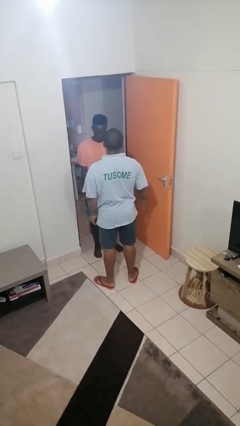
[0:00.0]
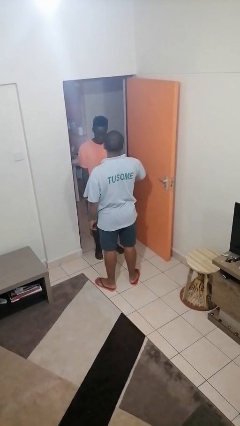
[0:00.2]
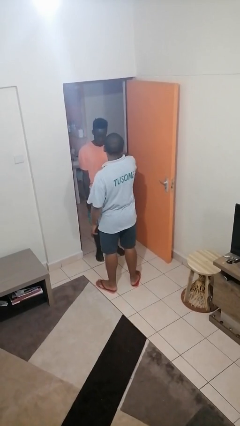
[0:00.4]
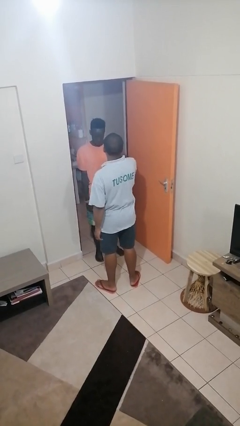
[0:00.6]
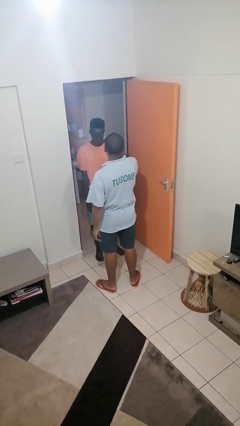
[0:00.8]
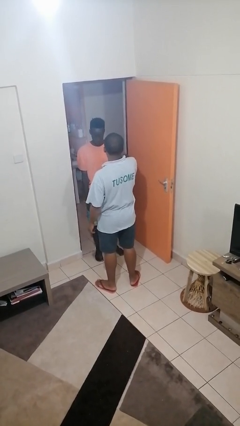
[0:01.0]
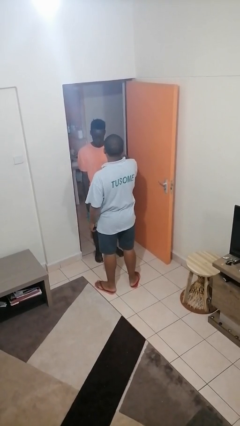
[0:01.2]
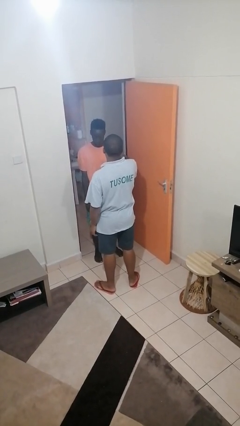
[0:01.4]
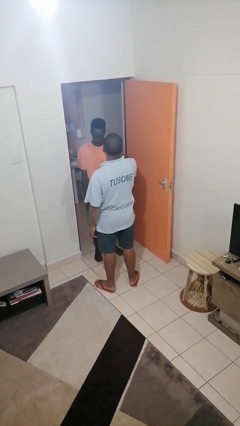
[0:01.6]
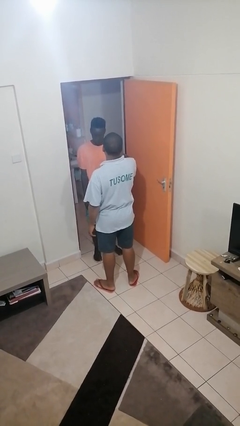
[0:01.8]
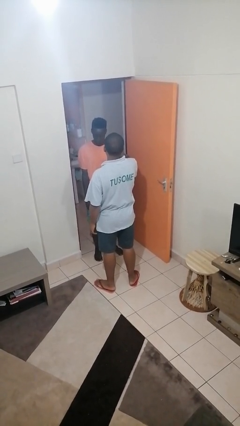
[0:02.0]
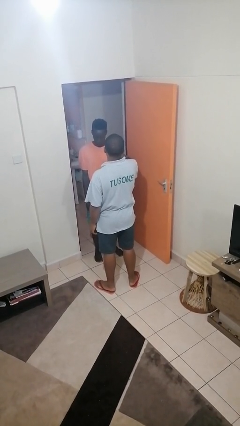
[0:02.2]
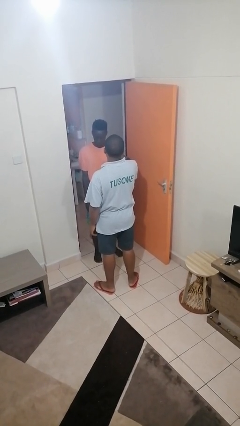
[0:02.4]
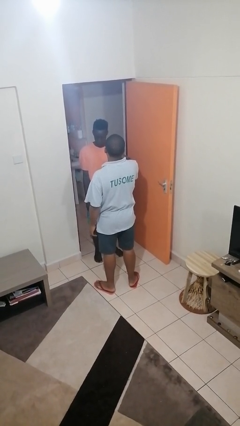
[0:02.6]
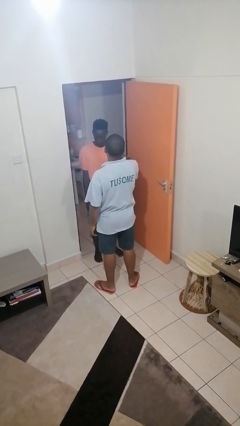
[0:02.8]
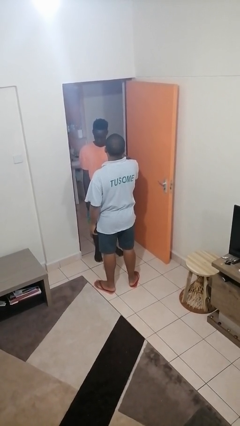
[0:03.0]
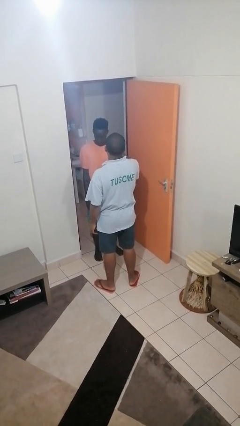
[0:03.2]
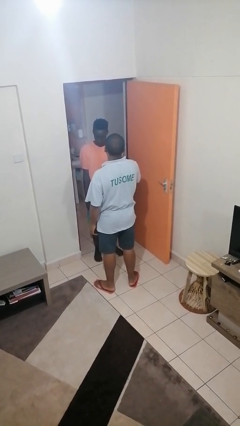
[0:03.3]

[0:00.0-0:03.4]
person grabs person by bicep

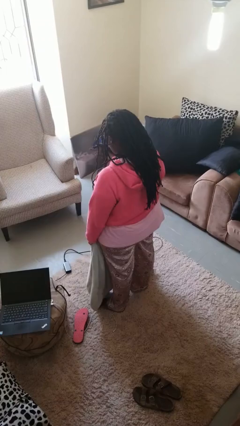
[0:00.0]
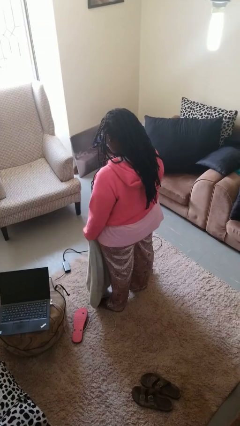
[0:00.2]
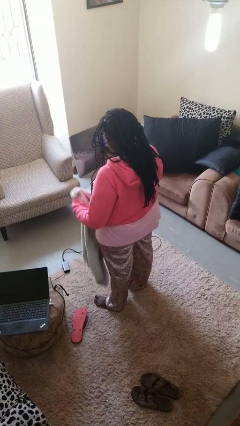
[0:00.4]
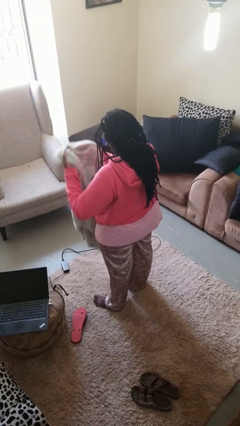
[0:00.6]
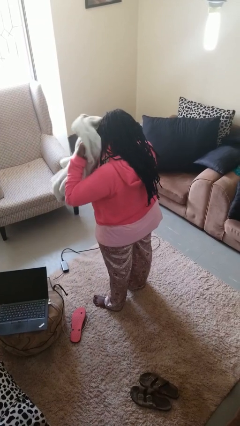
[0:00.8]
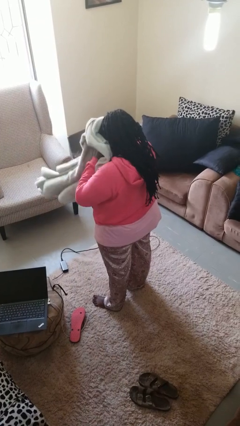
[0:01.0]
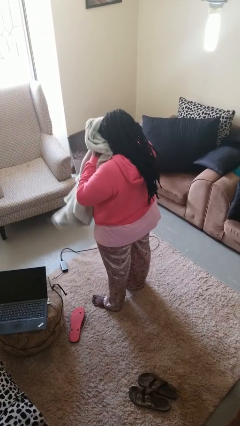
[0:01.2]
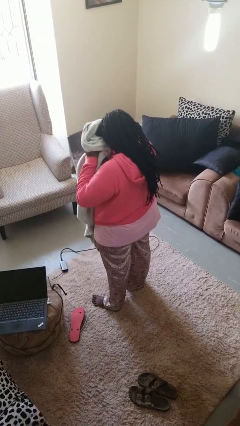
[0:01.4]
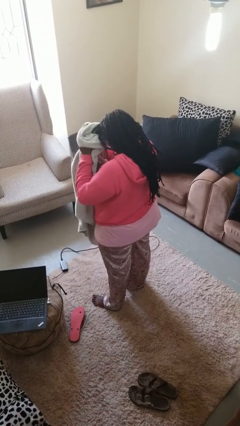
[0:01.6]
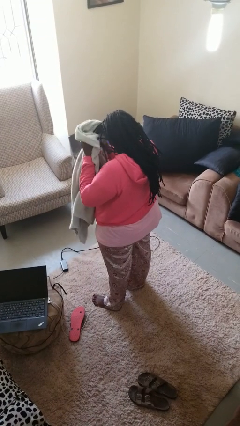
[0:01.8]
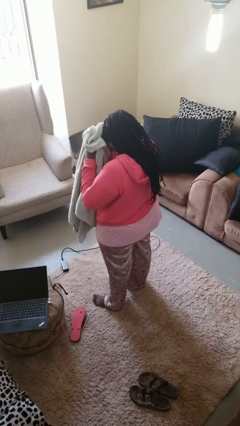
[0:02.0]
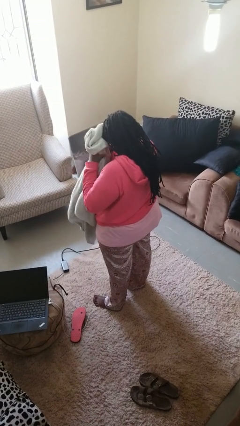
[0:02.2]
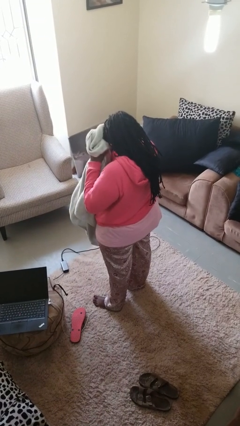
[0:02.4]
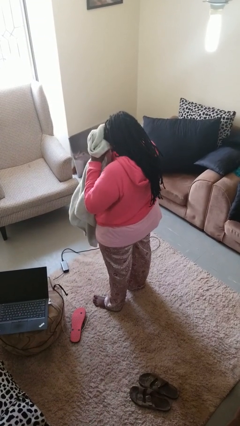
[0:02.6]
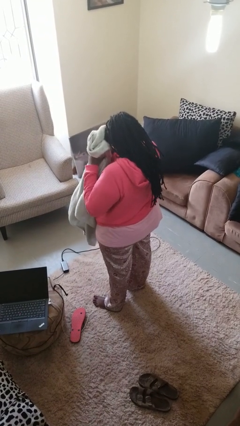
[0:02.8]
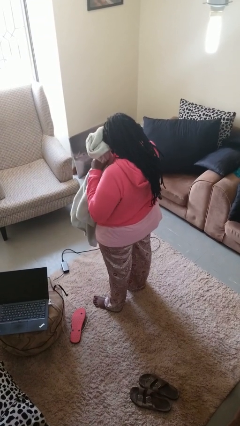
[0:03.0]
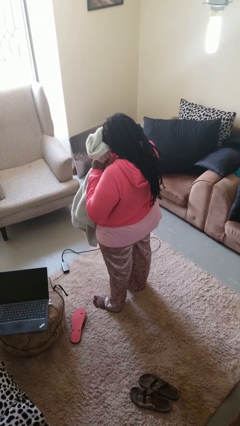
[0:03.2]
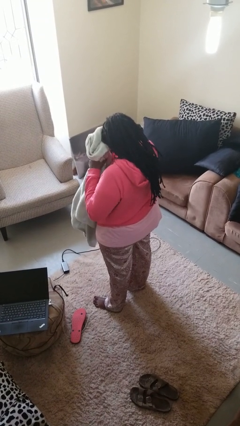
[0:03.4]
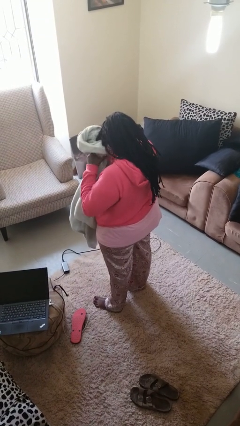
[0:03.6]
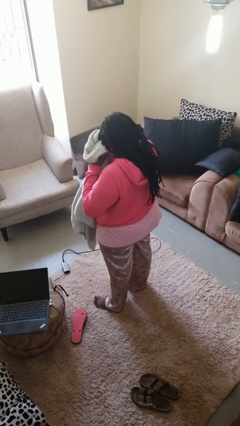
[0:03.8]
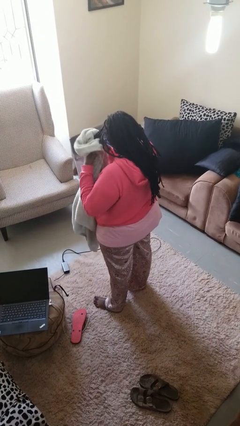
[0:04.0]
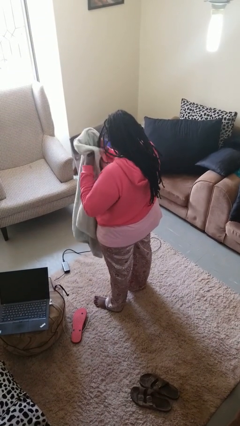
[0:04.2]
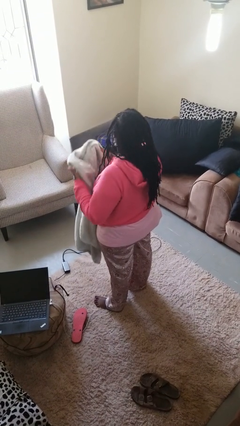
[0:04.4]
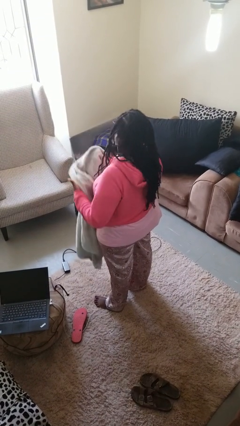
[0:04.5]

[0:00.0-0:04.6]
person dries hair with towel

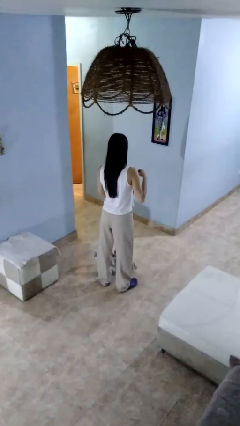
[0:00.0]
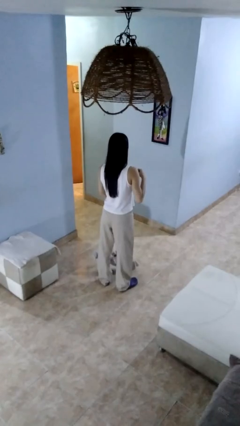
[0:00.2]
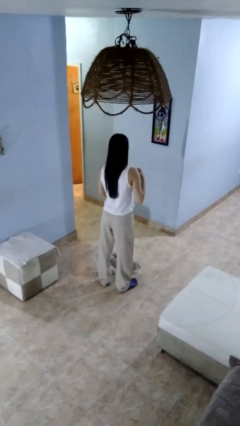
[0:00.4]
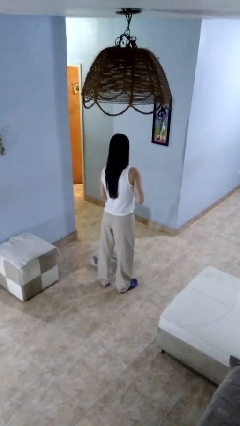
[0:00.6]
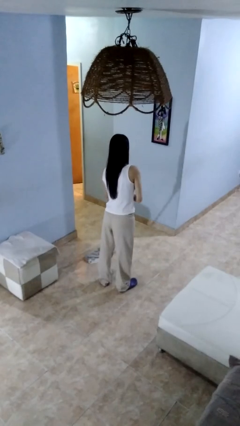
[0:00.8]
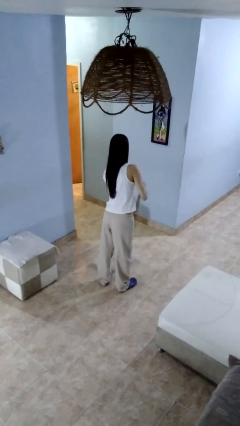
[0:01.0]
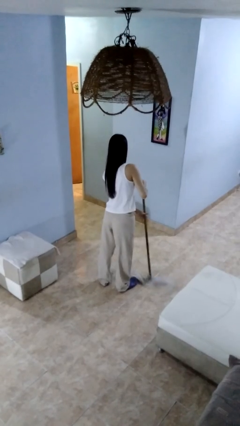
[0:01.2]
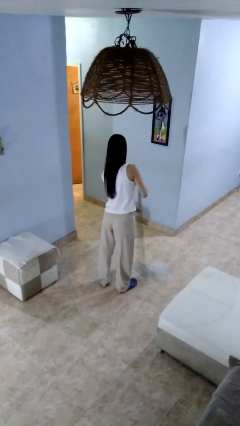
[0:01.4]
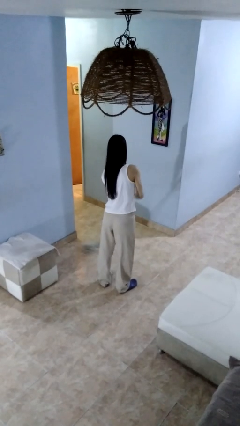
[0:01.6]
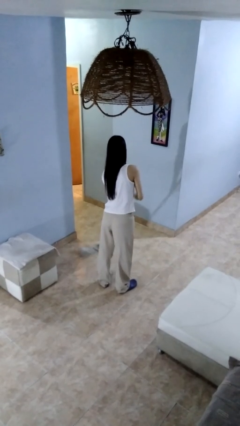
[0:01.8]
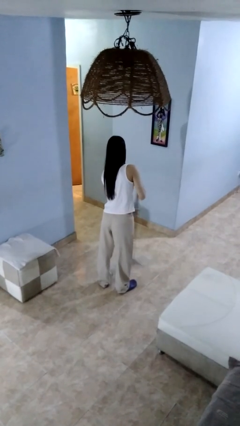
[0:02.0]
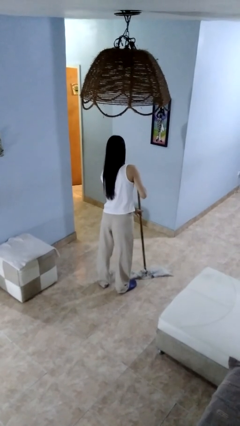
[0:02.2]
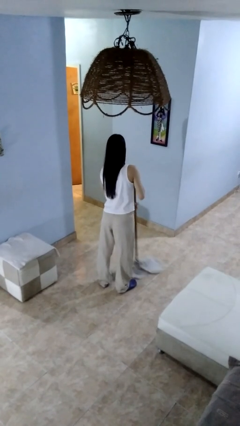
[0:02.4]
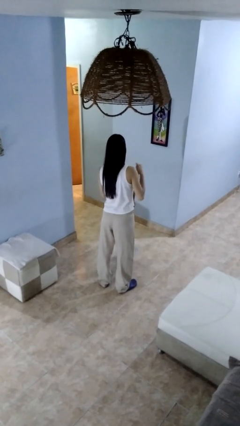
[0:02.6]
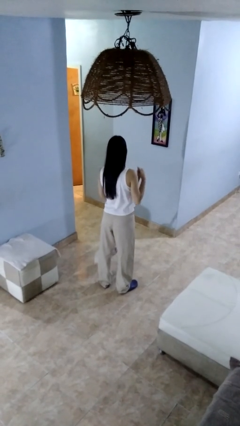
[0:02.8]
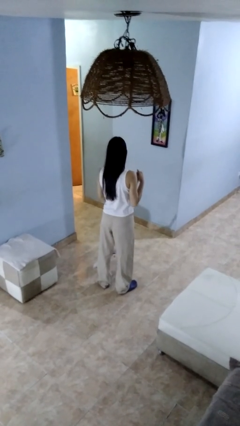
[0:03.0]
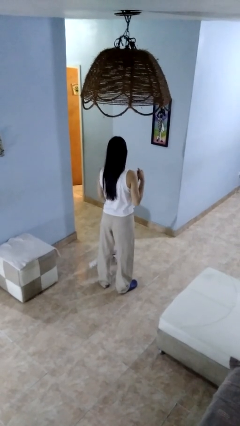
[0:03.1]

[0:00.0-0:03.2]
person mops

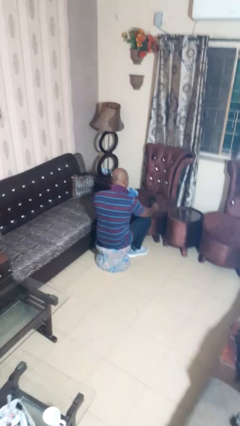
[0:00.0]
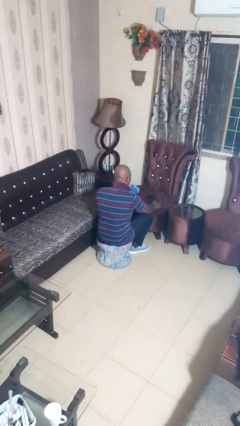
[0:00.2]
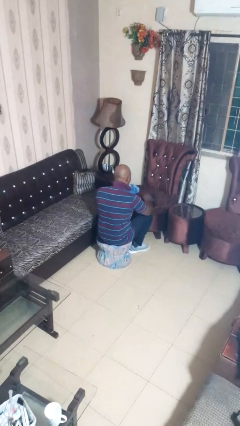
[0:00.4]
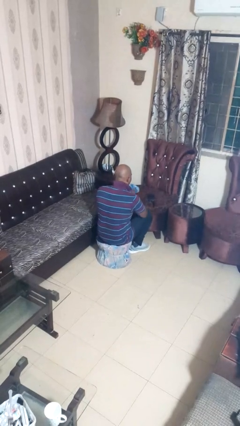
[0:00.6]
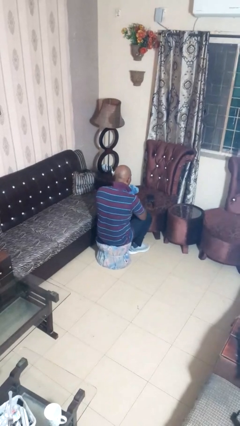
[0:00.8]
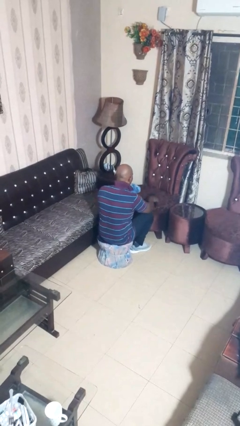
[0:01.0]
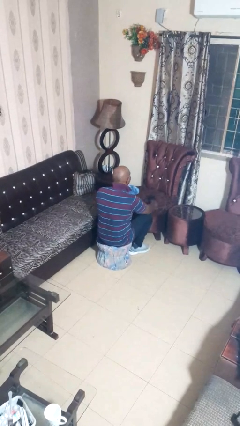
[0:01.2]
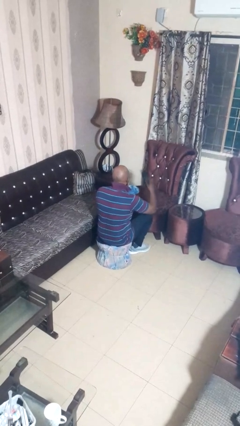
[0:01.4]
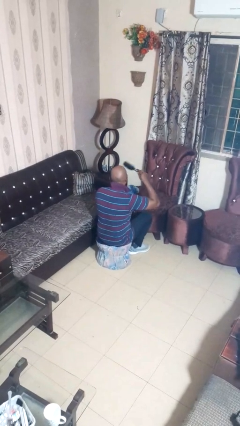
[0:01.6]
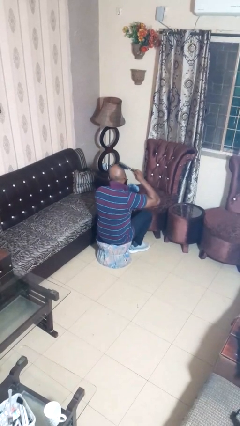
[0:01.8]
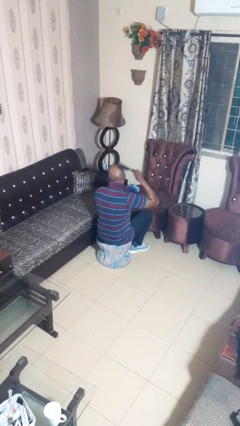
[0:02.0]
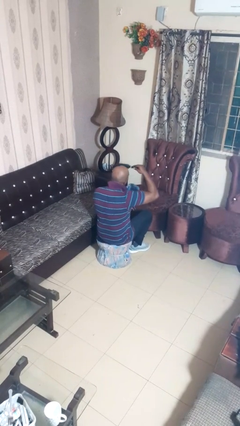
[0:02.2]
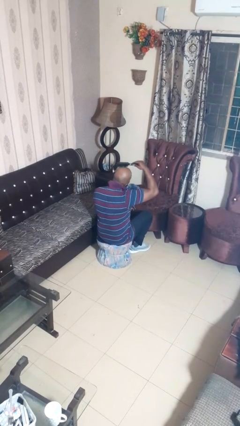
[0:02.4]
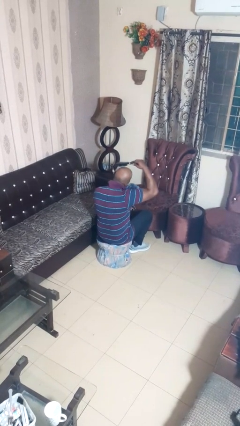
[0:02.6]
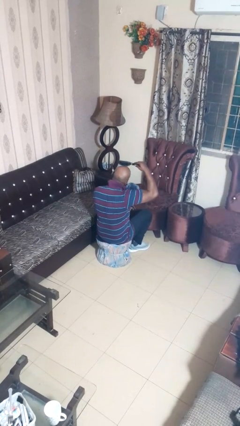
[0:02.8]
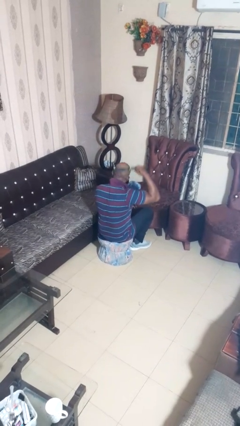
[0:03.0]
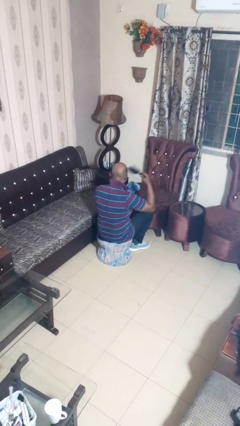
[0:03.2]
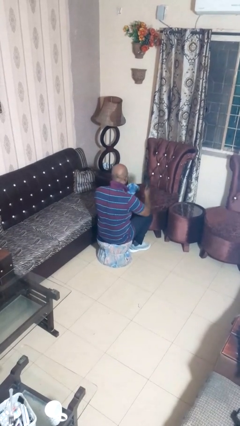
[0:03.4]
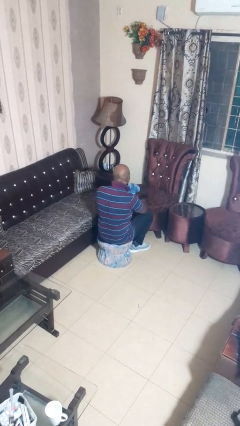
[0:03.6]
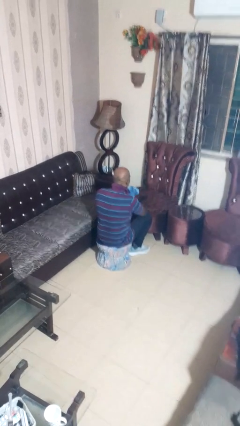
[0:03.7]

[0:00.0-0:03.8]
person brushes hair

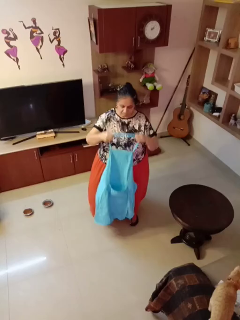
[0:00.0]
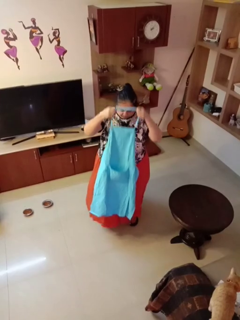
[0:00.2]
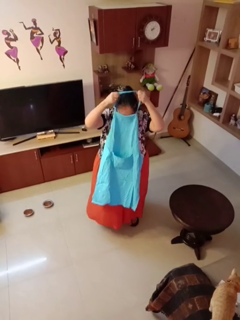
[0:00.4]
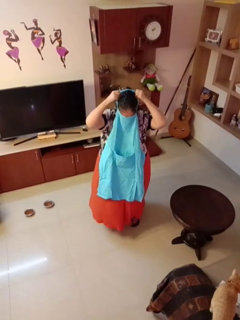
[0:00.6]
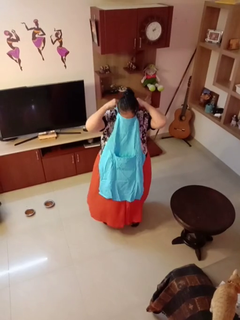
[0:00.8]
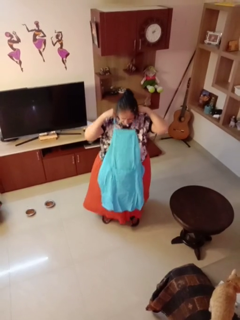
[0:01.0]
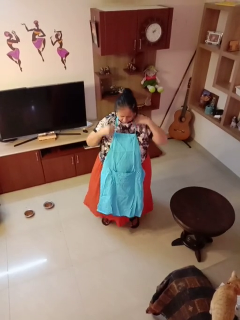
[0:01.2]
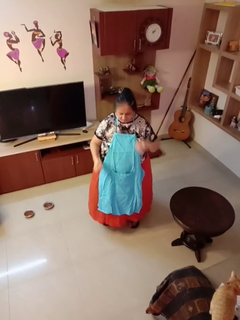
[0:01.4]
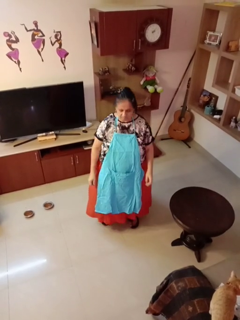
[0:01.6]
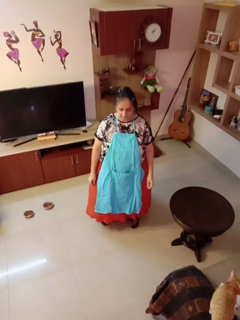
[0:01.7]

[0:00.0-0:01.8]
person puts on apron

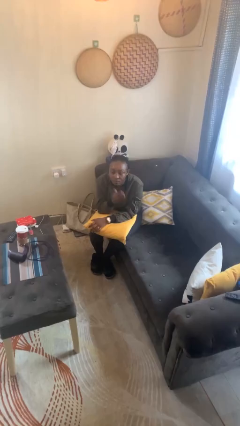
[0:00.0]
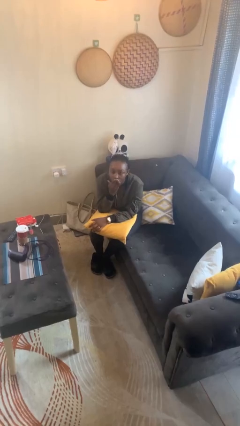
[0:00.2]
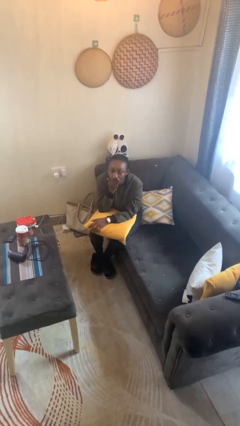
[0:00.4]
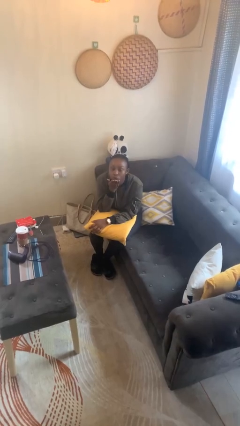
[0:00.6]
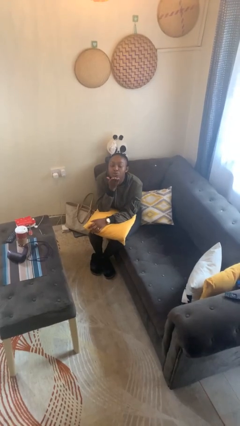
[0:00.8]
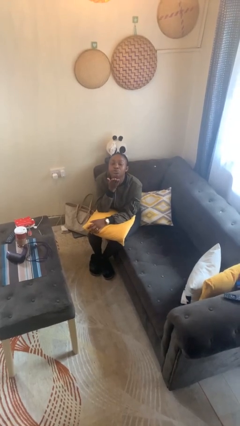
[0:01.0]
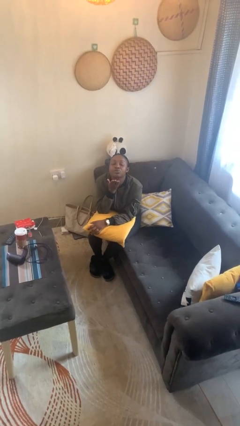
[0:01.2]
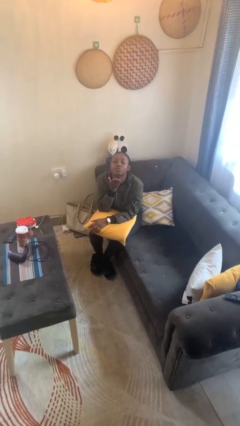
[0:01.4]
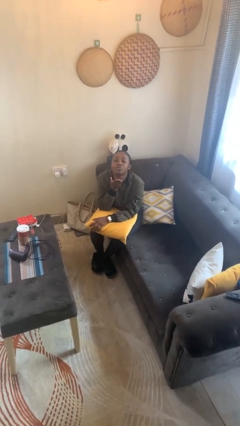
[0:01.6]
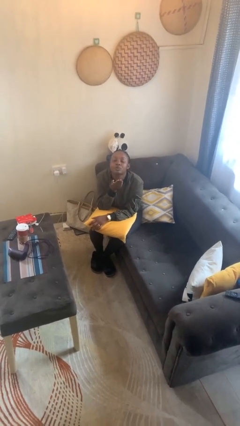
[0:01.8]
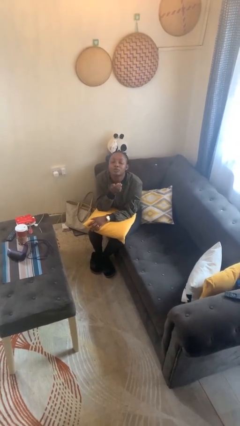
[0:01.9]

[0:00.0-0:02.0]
person gestures blow kiss
